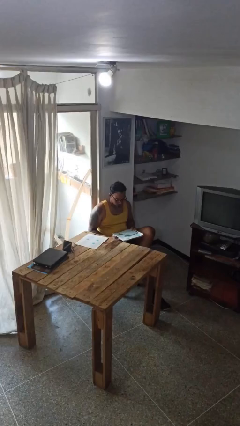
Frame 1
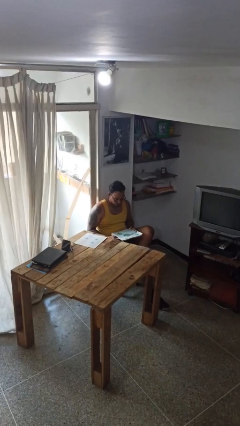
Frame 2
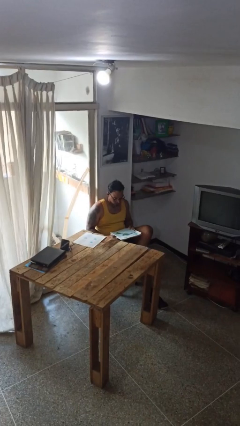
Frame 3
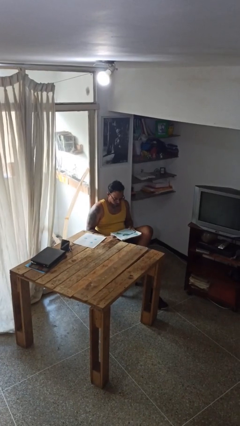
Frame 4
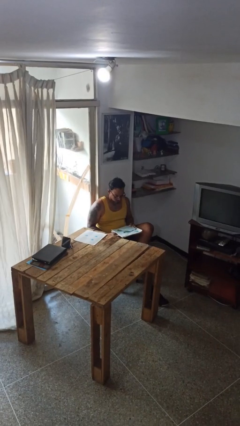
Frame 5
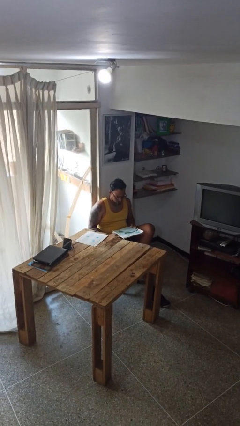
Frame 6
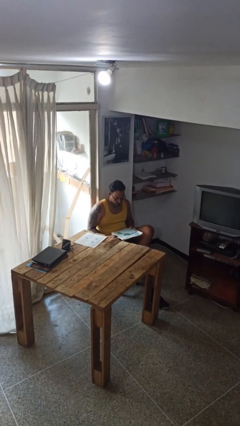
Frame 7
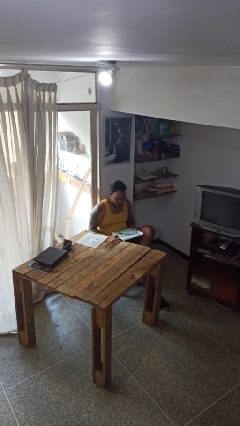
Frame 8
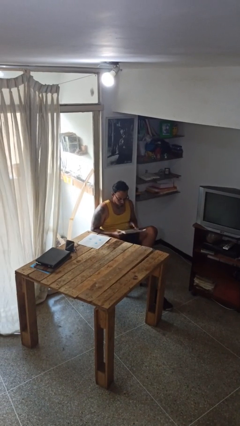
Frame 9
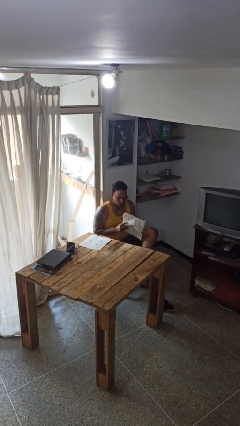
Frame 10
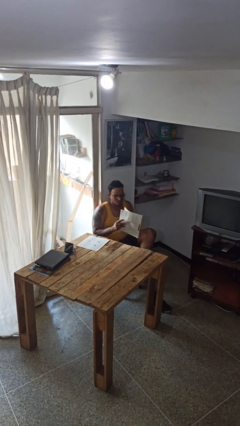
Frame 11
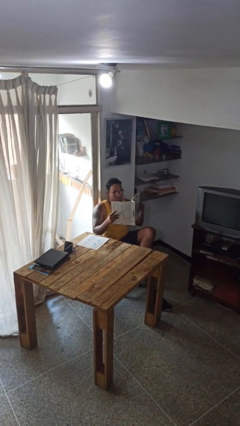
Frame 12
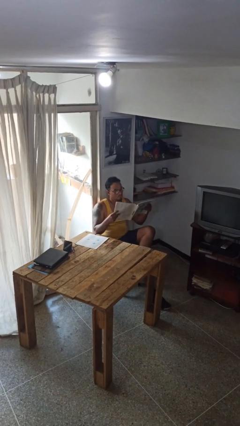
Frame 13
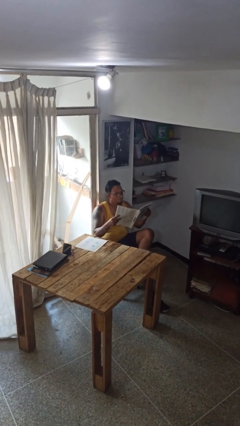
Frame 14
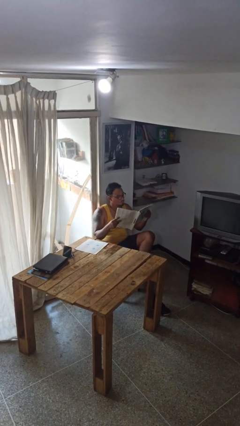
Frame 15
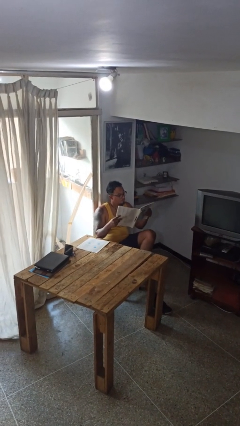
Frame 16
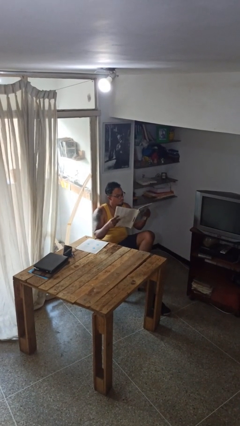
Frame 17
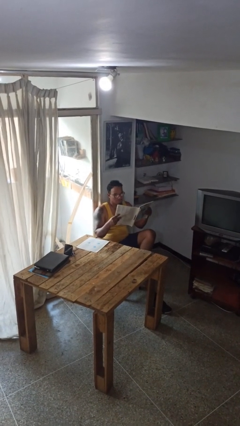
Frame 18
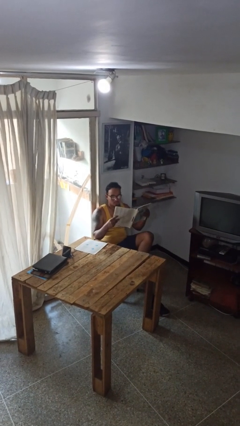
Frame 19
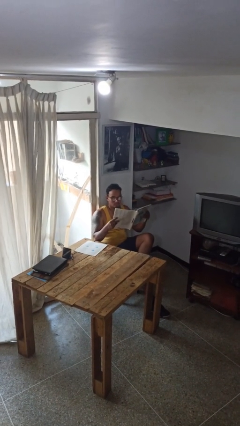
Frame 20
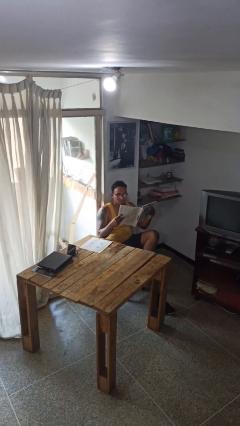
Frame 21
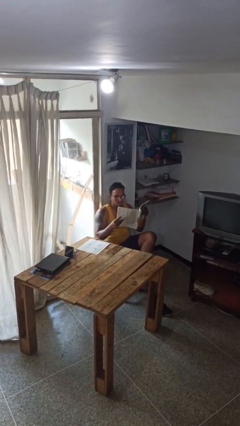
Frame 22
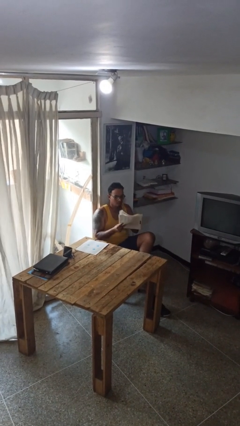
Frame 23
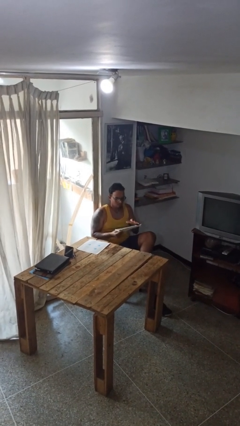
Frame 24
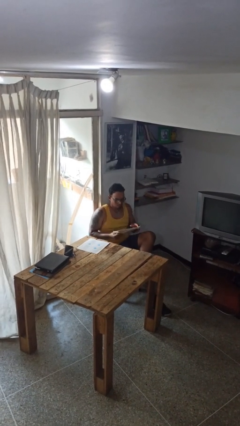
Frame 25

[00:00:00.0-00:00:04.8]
person reads document

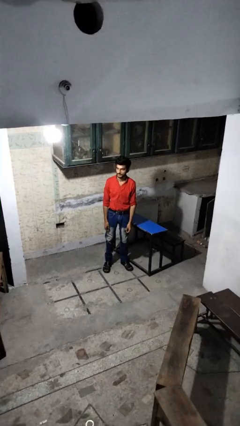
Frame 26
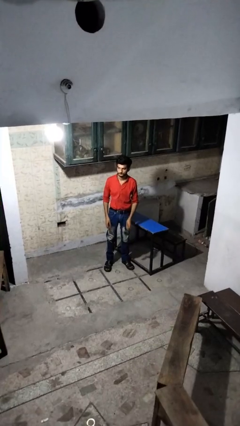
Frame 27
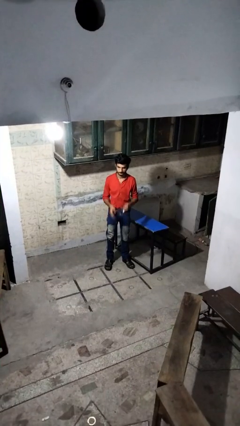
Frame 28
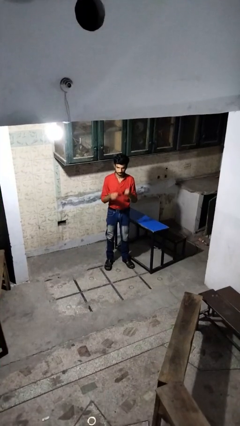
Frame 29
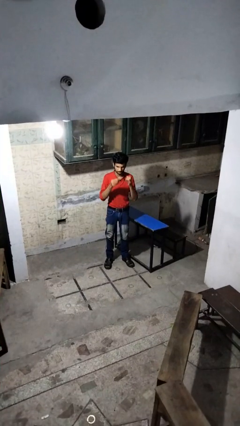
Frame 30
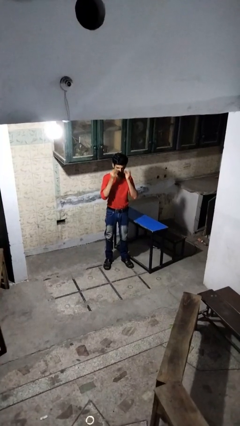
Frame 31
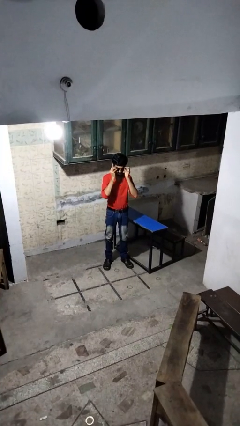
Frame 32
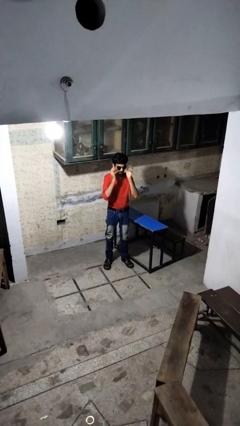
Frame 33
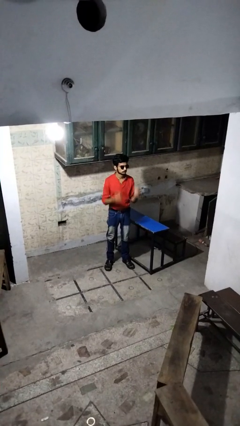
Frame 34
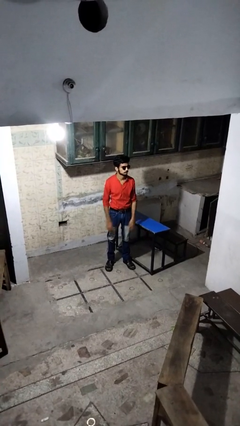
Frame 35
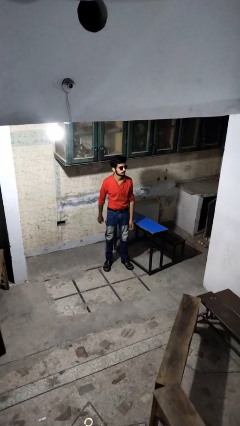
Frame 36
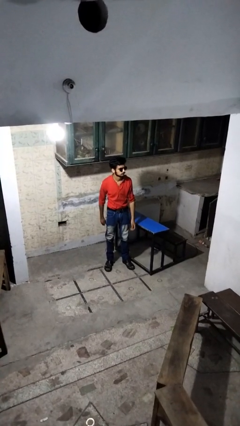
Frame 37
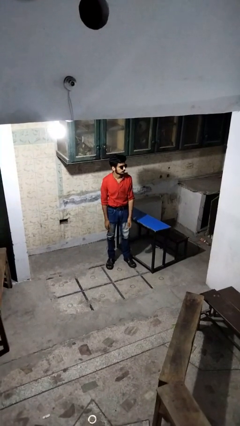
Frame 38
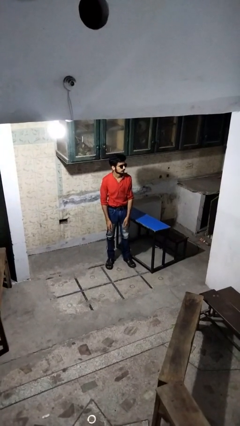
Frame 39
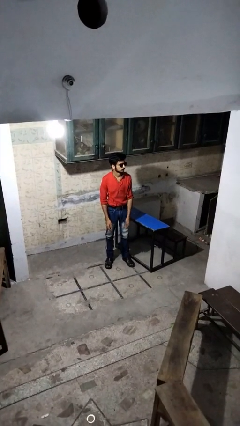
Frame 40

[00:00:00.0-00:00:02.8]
person puts on sunglasses

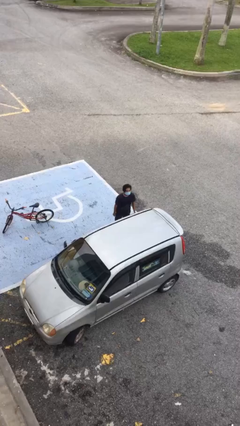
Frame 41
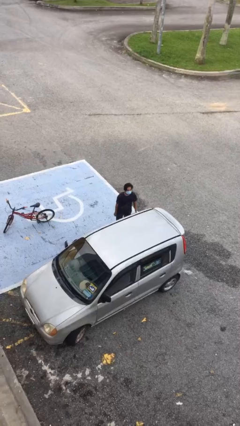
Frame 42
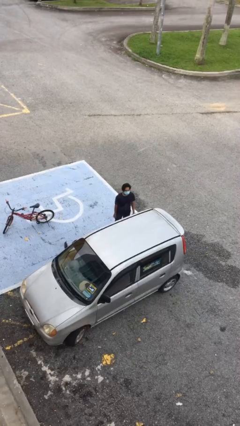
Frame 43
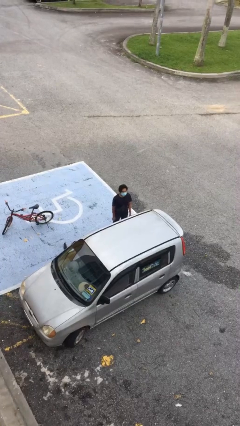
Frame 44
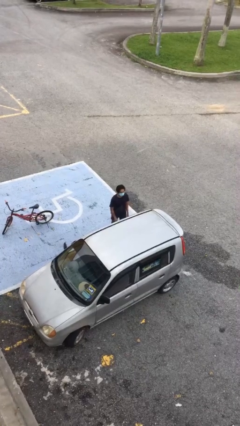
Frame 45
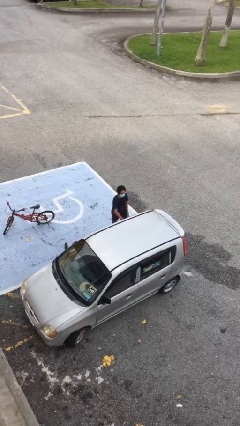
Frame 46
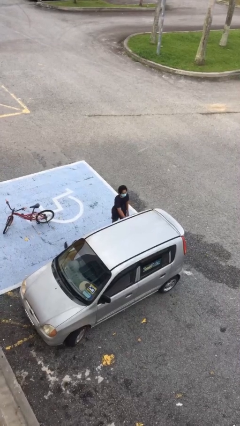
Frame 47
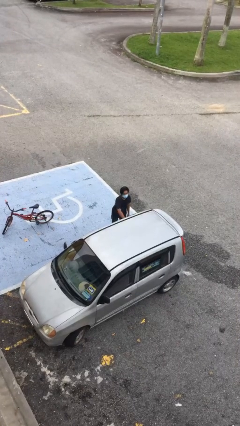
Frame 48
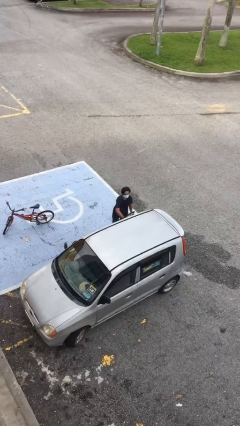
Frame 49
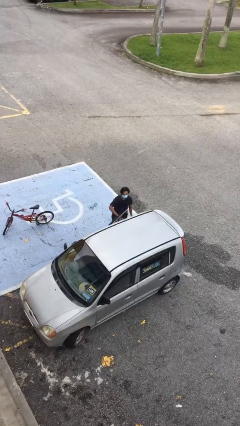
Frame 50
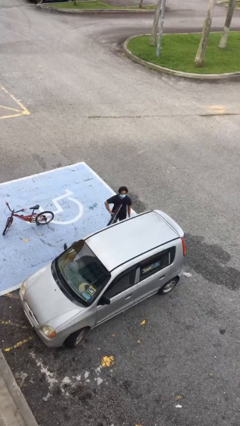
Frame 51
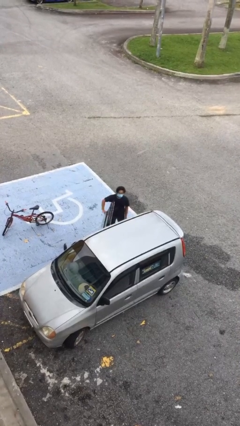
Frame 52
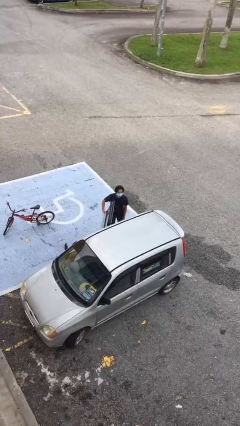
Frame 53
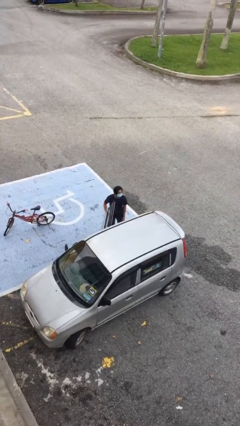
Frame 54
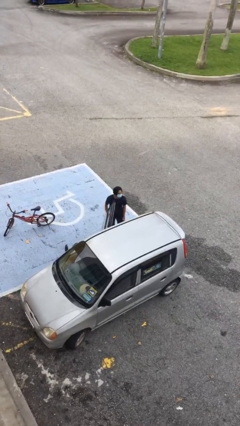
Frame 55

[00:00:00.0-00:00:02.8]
person opens car door

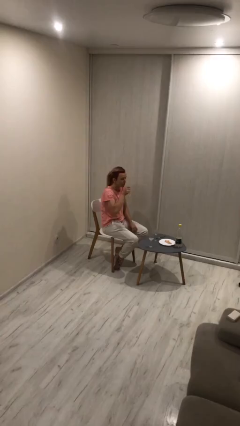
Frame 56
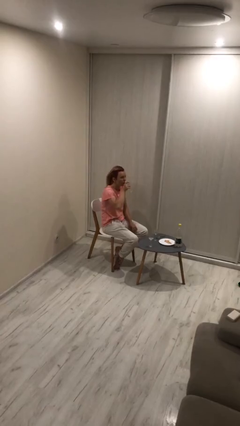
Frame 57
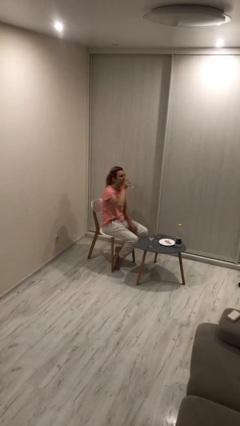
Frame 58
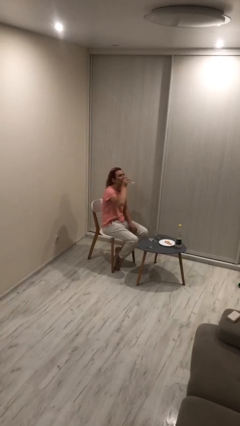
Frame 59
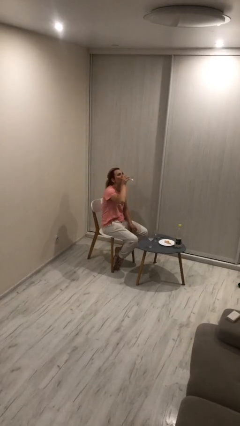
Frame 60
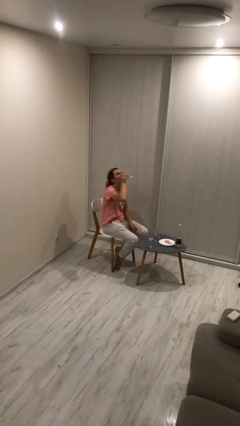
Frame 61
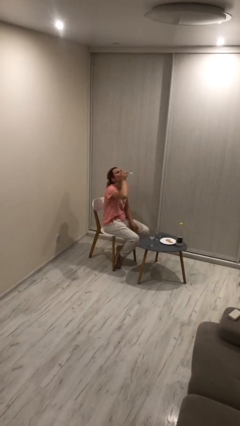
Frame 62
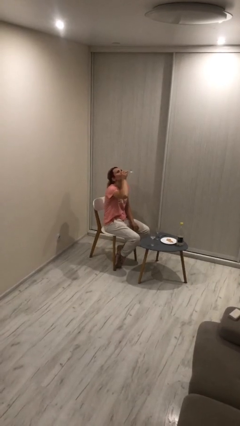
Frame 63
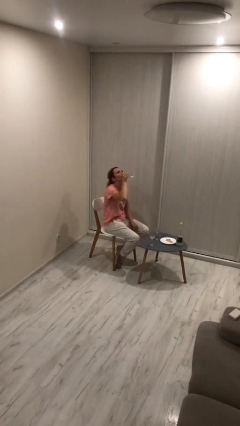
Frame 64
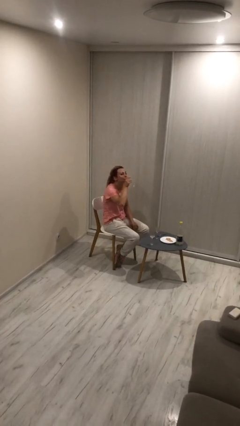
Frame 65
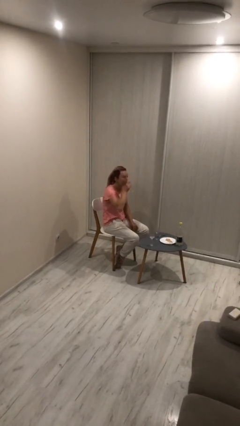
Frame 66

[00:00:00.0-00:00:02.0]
person drinks from shotglass

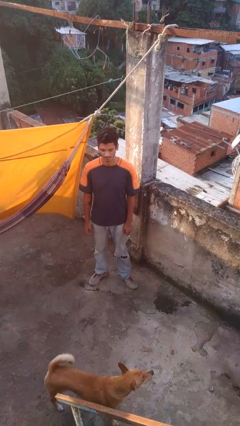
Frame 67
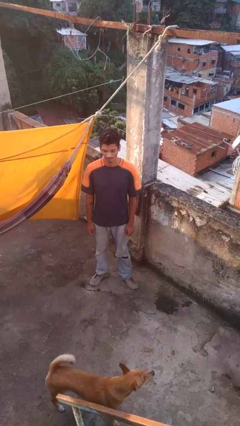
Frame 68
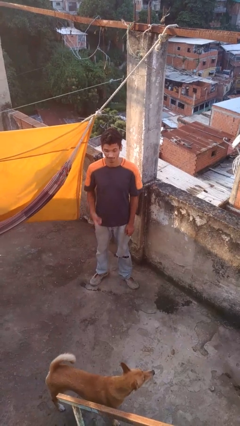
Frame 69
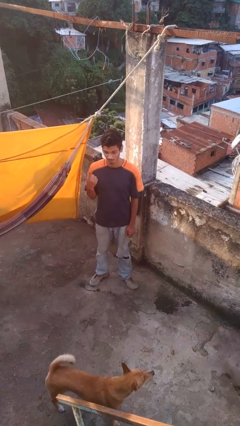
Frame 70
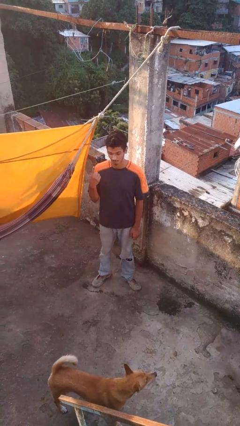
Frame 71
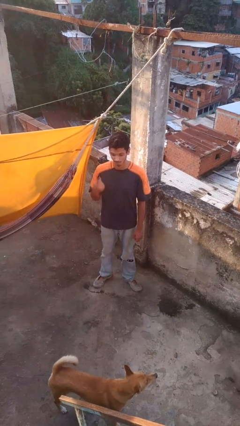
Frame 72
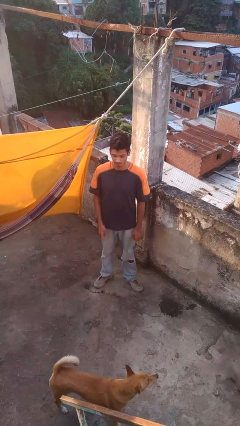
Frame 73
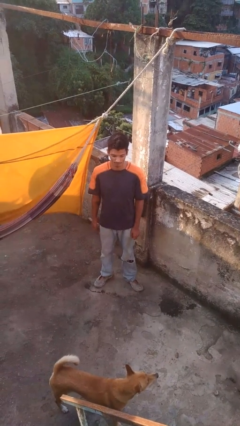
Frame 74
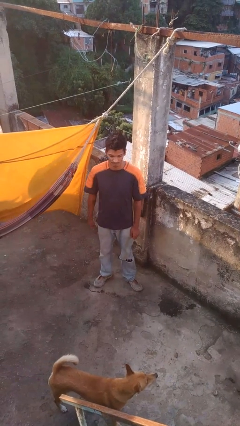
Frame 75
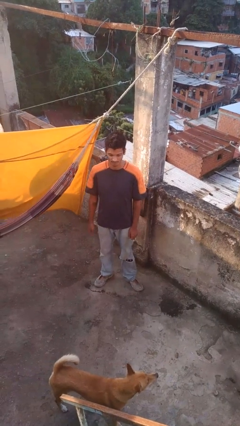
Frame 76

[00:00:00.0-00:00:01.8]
person gestures number one

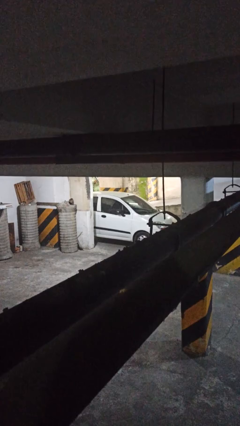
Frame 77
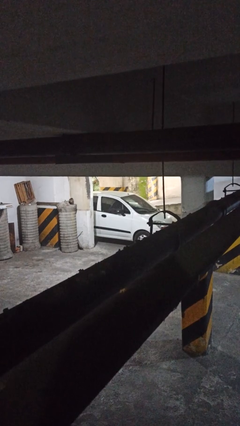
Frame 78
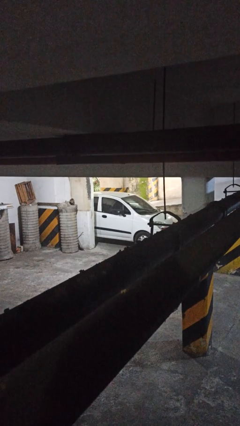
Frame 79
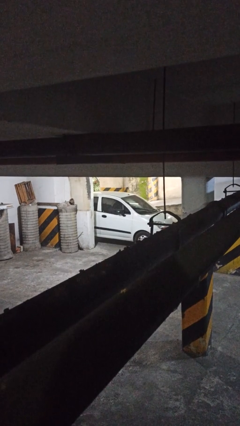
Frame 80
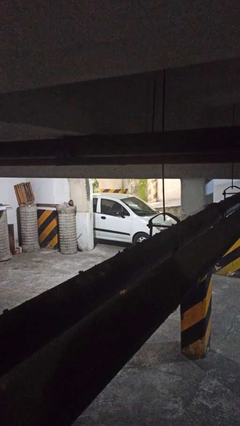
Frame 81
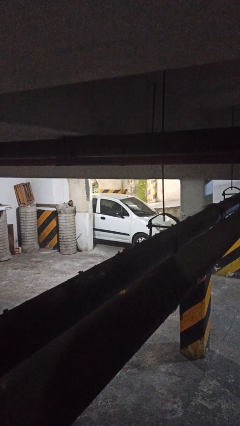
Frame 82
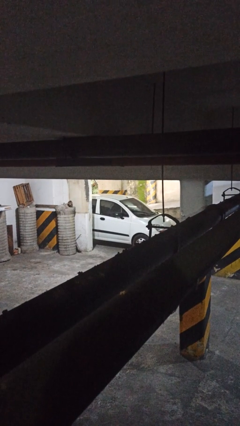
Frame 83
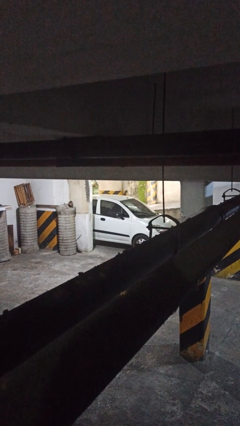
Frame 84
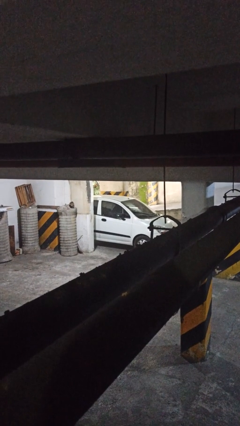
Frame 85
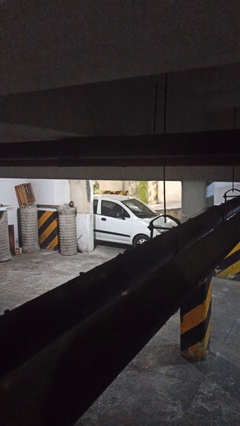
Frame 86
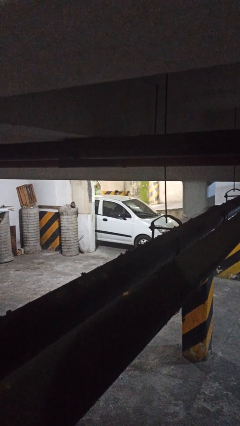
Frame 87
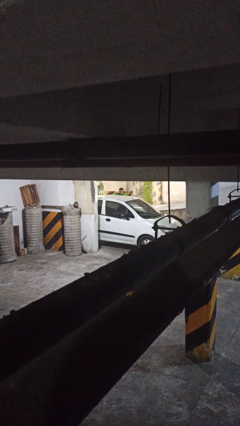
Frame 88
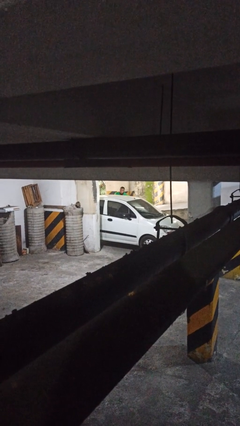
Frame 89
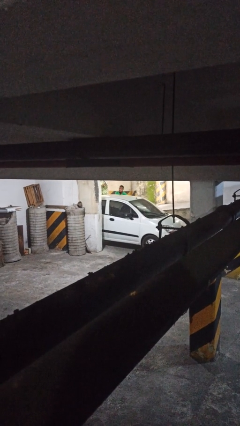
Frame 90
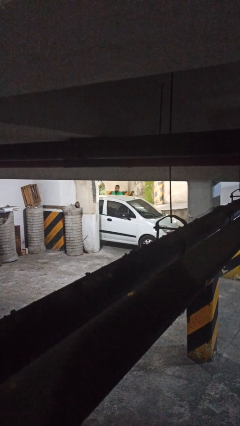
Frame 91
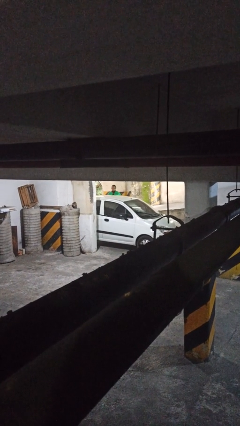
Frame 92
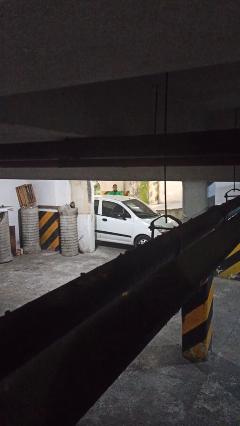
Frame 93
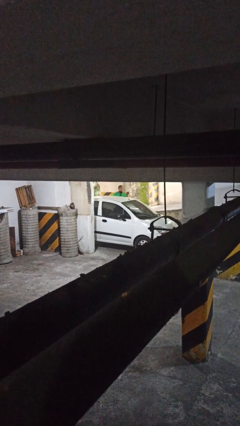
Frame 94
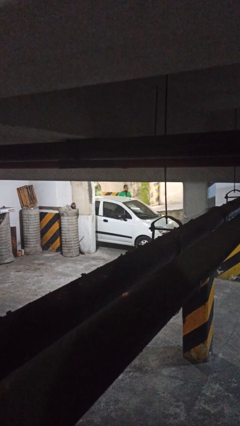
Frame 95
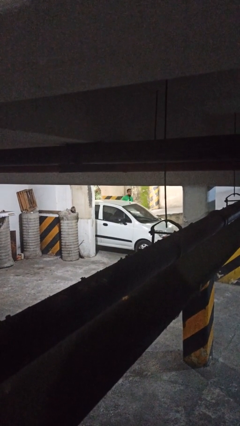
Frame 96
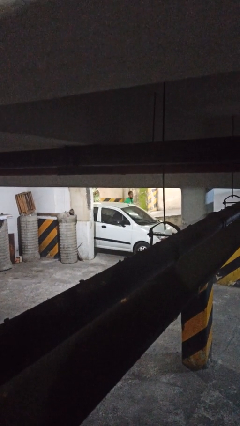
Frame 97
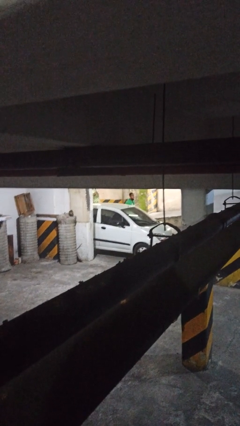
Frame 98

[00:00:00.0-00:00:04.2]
car drops off person
